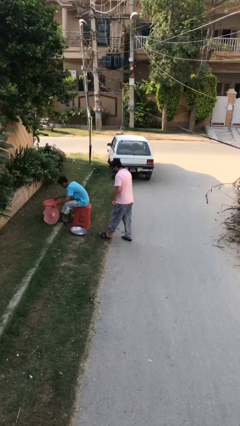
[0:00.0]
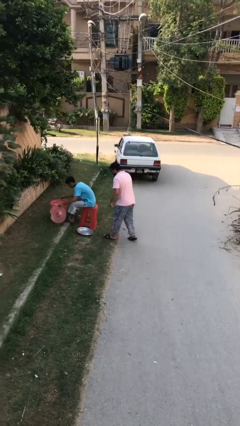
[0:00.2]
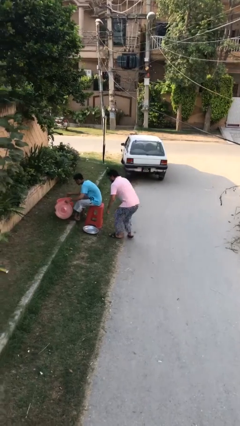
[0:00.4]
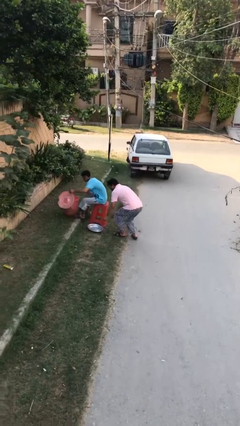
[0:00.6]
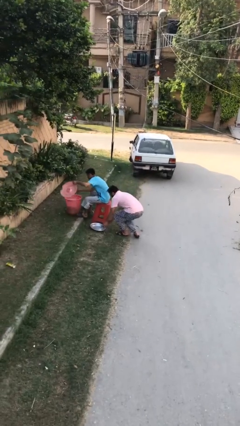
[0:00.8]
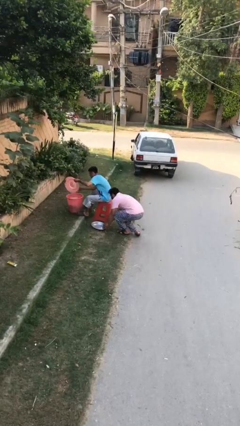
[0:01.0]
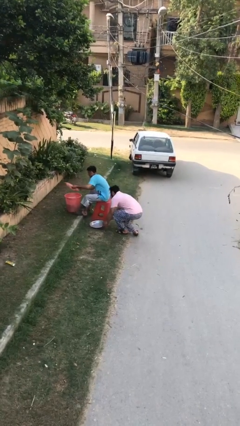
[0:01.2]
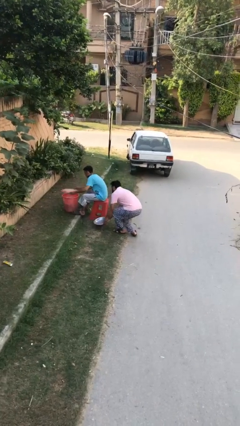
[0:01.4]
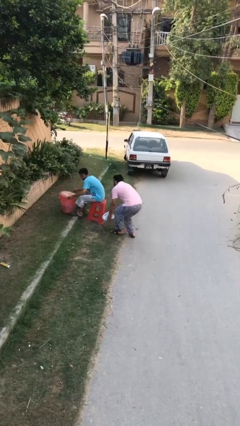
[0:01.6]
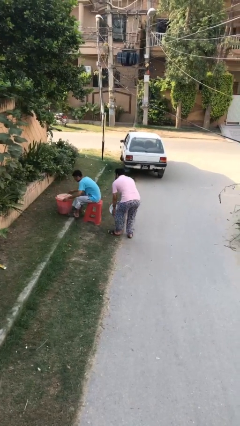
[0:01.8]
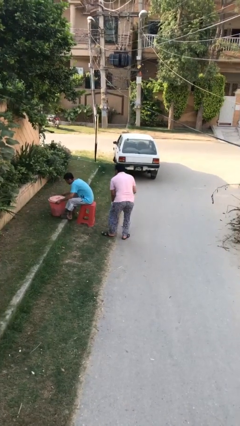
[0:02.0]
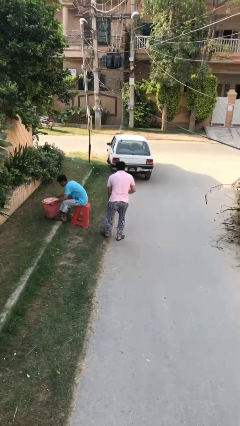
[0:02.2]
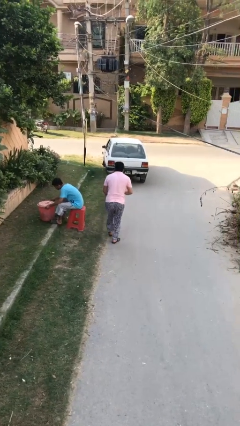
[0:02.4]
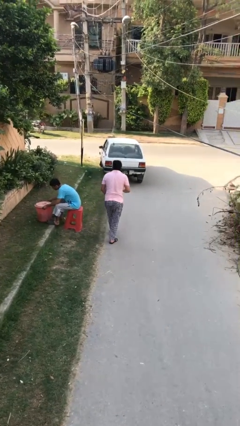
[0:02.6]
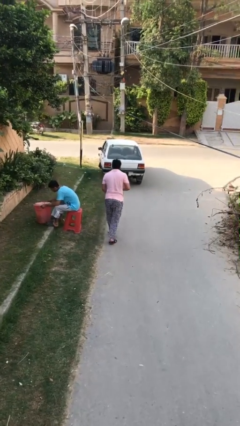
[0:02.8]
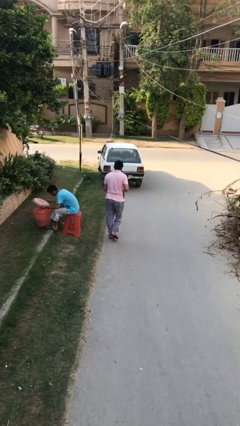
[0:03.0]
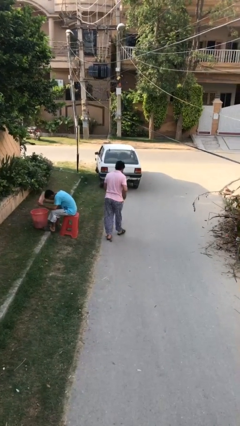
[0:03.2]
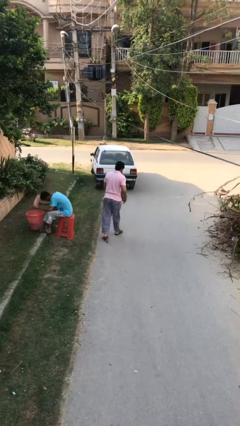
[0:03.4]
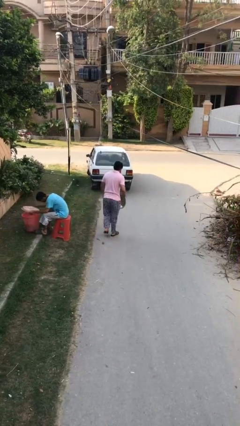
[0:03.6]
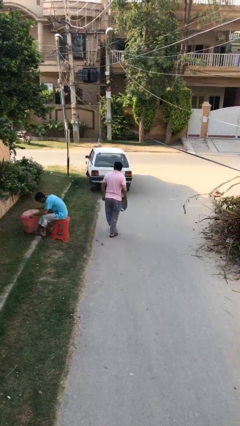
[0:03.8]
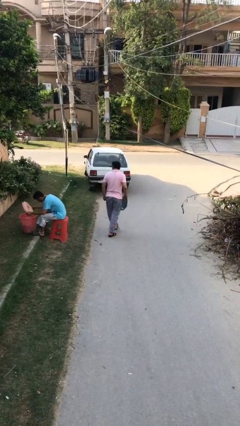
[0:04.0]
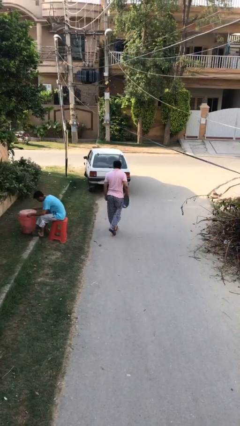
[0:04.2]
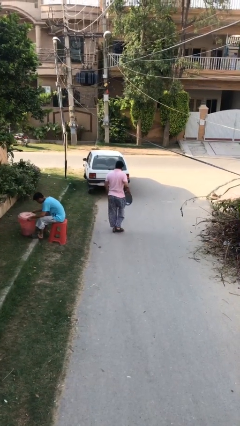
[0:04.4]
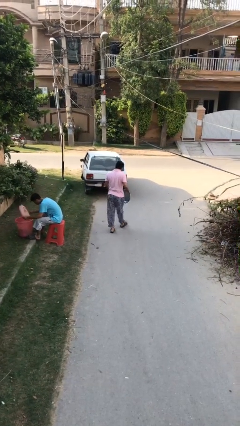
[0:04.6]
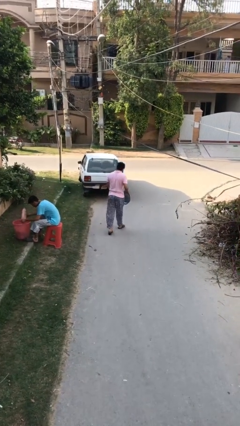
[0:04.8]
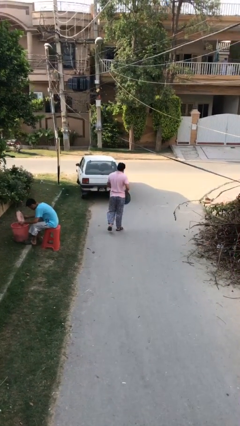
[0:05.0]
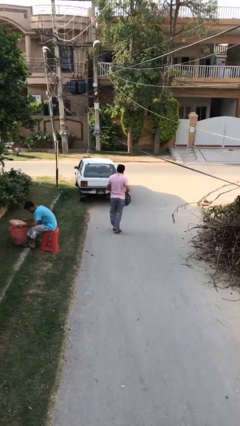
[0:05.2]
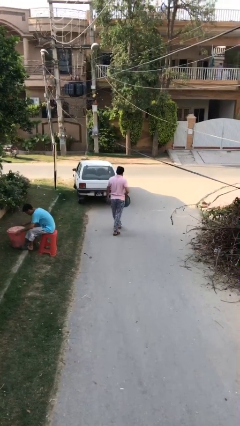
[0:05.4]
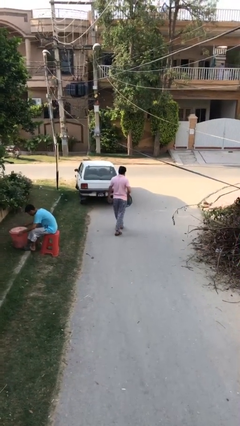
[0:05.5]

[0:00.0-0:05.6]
person steals object from person

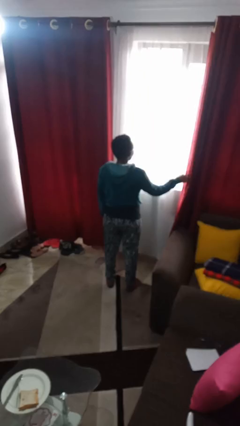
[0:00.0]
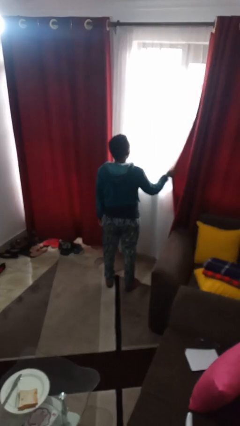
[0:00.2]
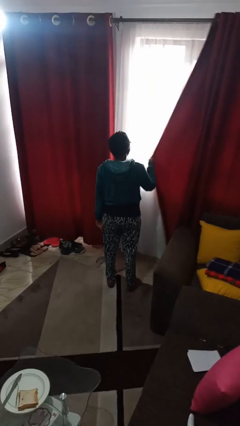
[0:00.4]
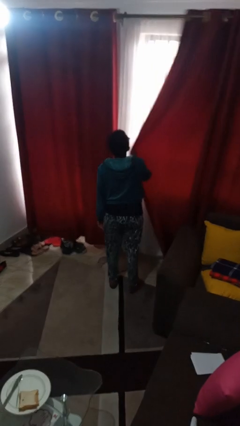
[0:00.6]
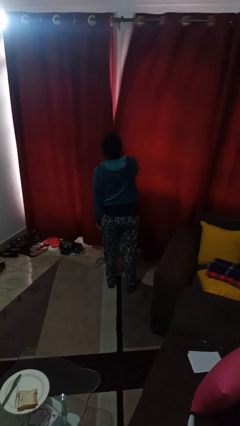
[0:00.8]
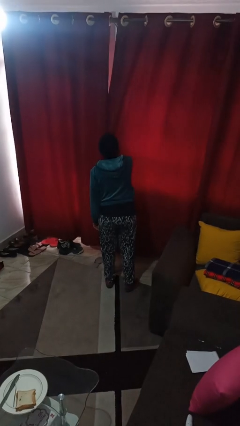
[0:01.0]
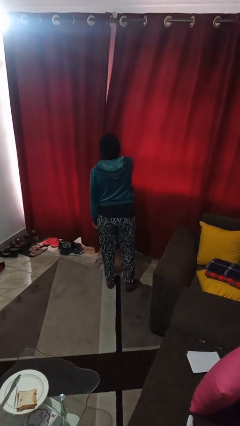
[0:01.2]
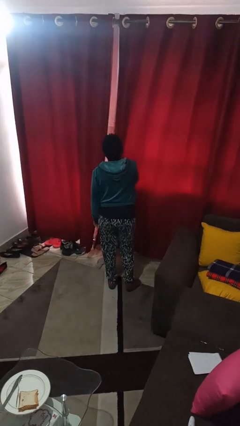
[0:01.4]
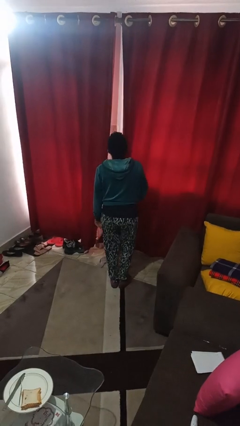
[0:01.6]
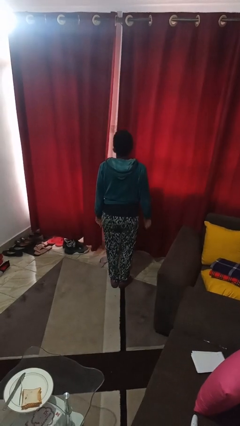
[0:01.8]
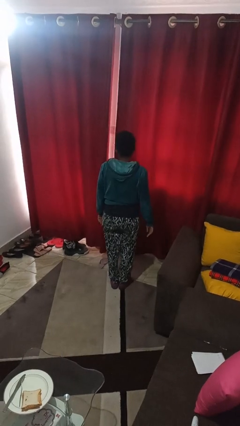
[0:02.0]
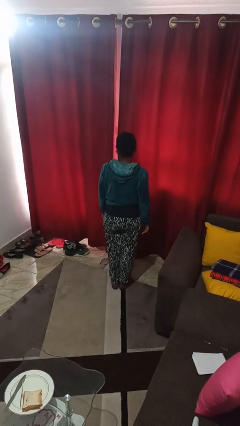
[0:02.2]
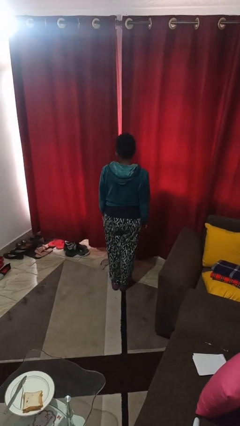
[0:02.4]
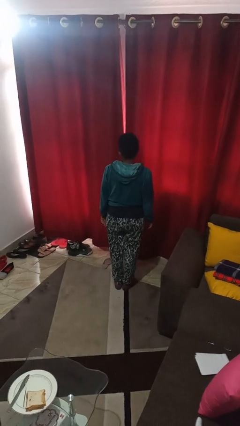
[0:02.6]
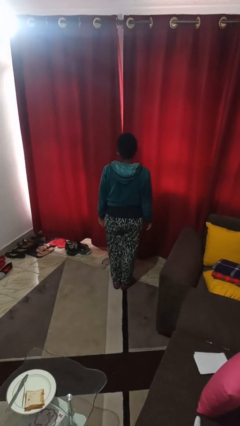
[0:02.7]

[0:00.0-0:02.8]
person closes curtains

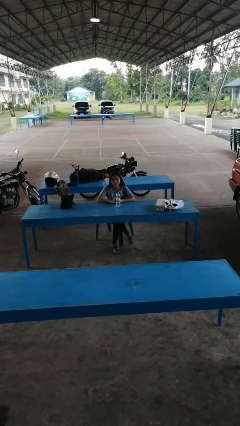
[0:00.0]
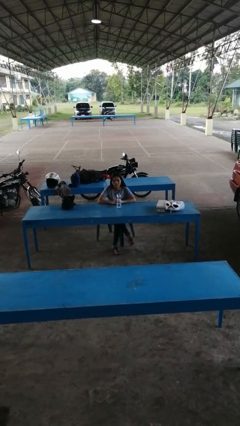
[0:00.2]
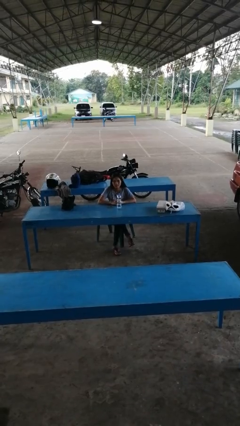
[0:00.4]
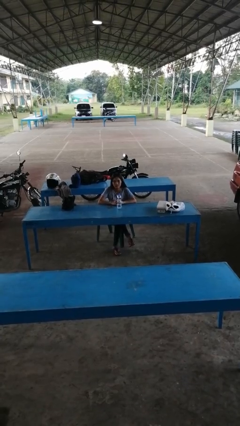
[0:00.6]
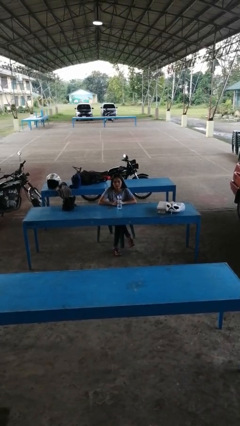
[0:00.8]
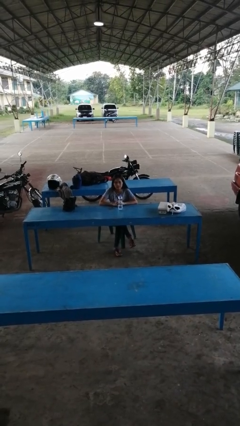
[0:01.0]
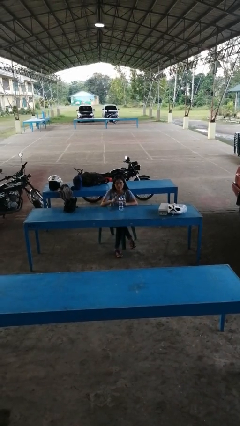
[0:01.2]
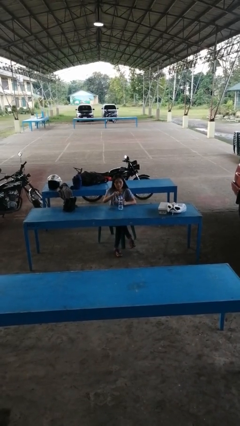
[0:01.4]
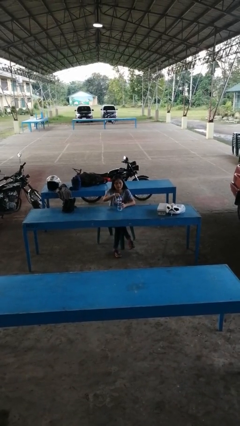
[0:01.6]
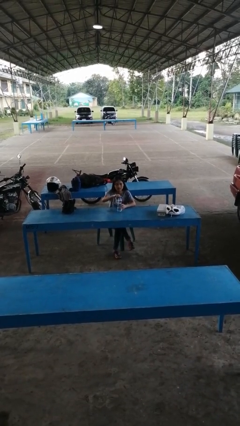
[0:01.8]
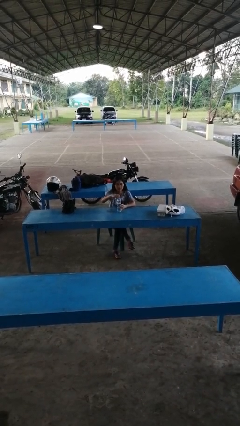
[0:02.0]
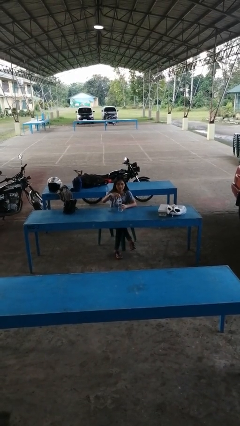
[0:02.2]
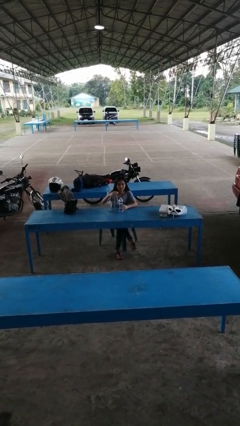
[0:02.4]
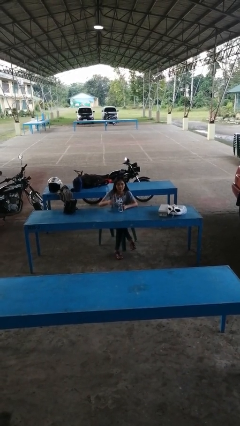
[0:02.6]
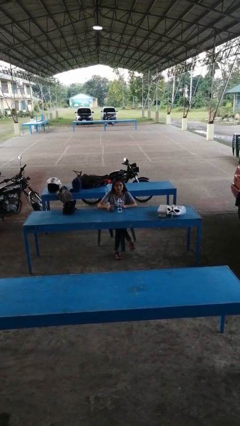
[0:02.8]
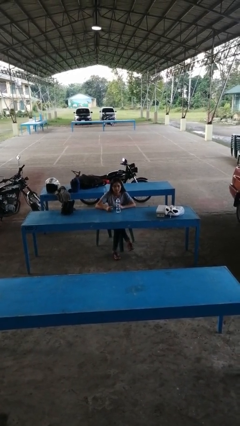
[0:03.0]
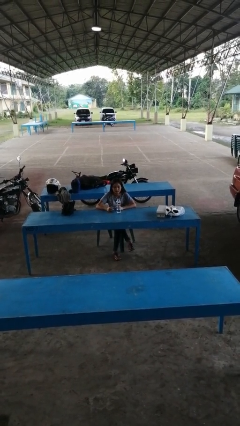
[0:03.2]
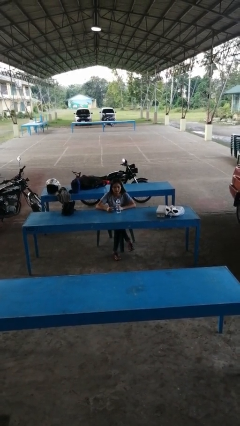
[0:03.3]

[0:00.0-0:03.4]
person unscrews lid from bottle

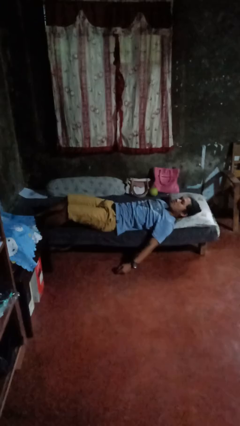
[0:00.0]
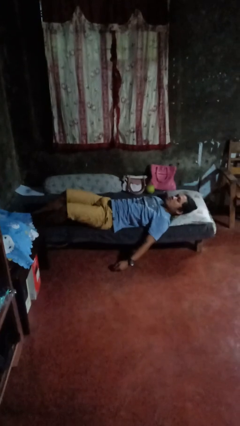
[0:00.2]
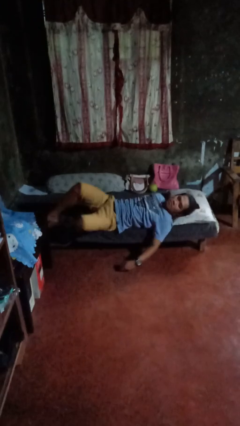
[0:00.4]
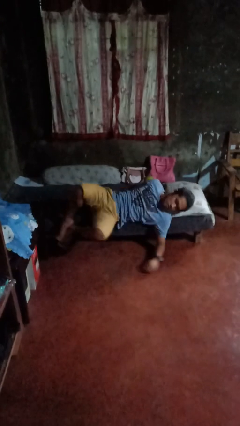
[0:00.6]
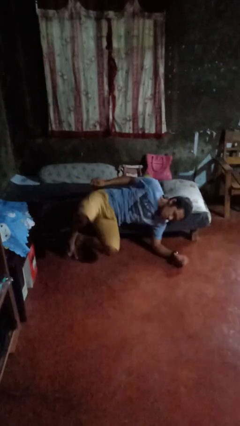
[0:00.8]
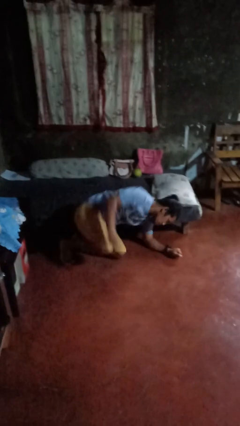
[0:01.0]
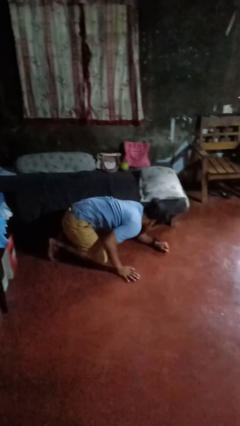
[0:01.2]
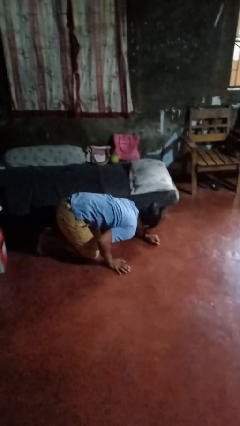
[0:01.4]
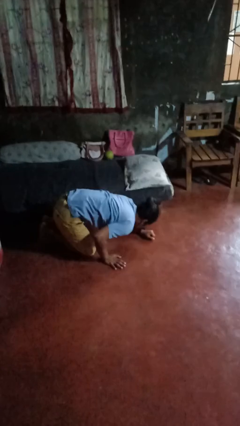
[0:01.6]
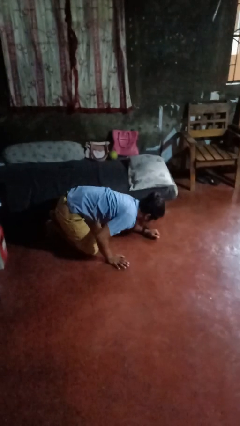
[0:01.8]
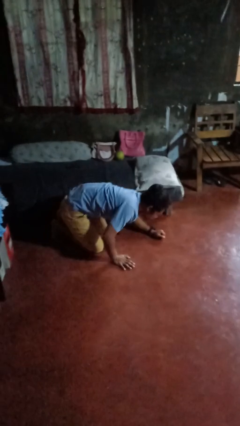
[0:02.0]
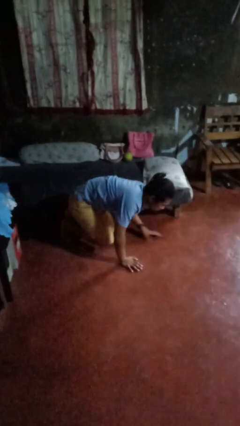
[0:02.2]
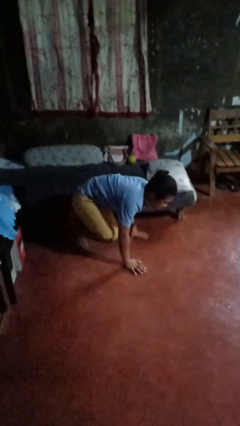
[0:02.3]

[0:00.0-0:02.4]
person falls from bed

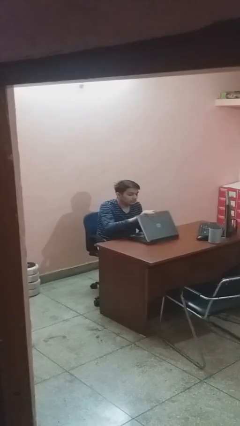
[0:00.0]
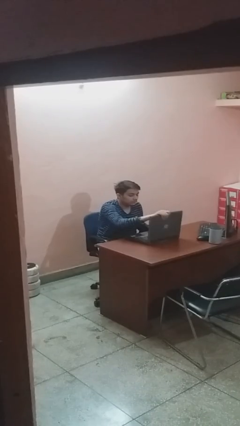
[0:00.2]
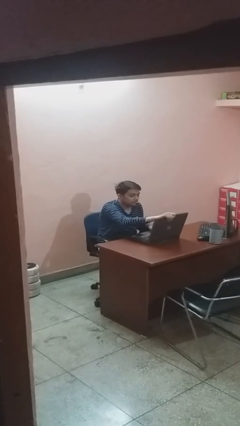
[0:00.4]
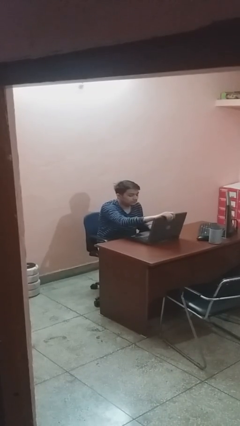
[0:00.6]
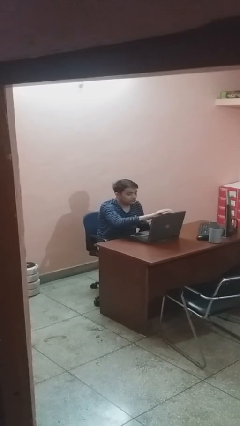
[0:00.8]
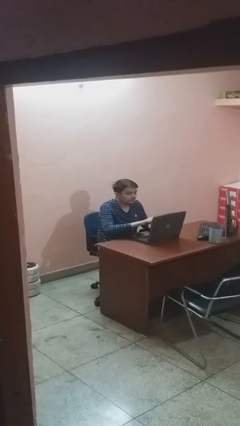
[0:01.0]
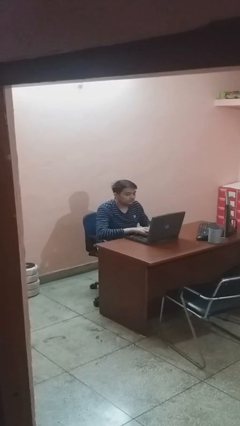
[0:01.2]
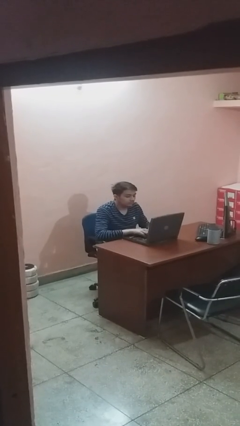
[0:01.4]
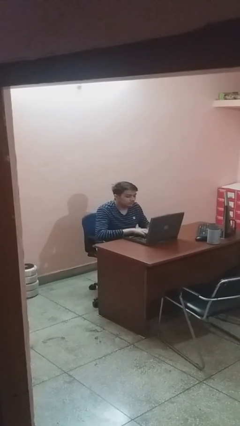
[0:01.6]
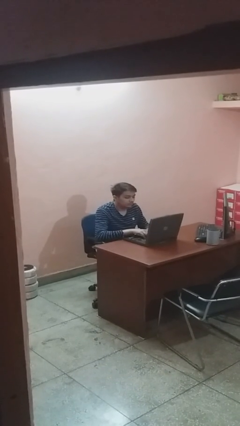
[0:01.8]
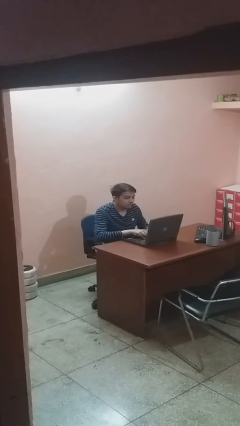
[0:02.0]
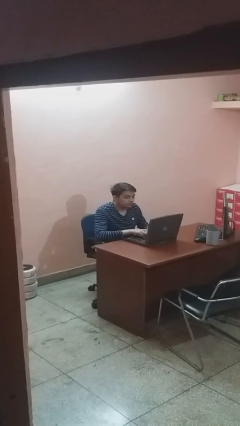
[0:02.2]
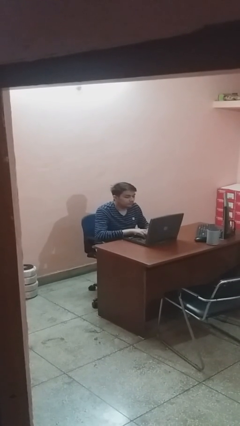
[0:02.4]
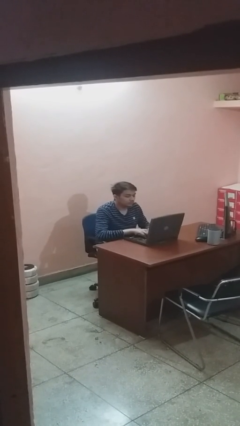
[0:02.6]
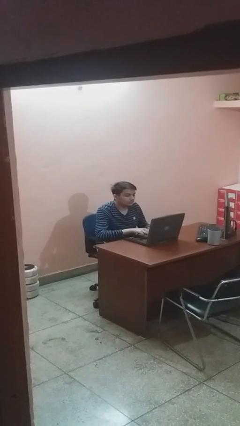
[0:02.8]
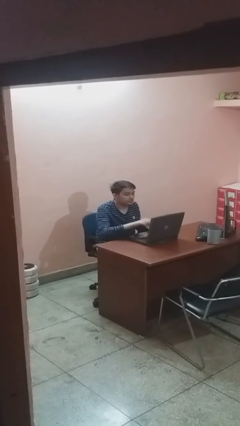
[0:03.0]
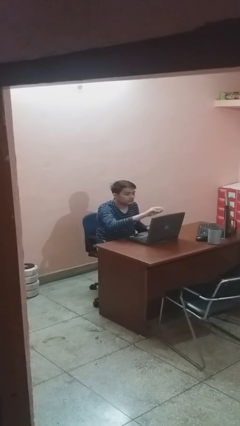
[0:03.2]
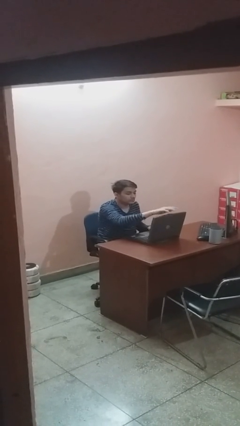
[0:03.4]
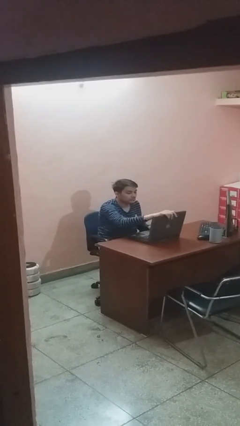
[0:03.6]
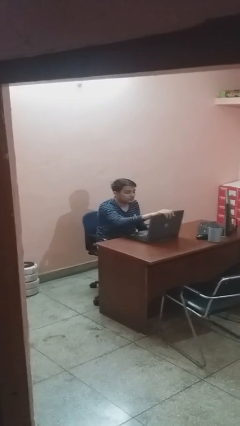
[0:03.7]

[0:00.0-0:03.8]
person interacts with laptop
